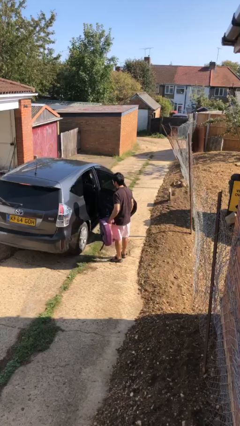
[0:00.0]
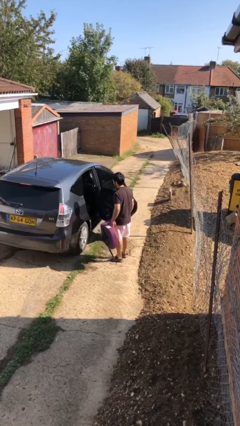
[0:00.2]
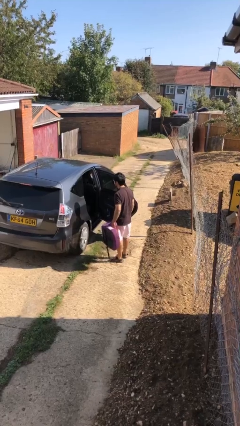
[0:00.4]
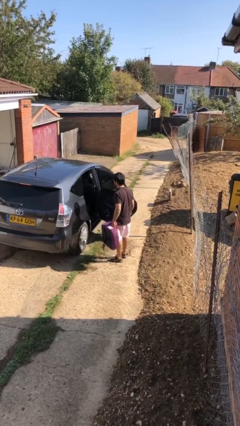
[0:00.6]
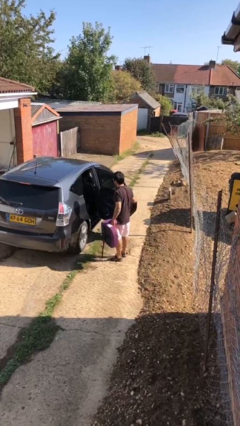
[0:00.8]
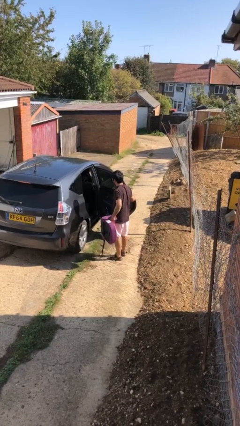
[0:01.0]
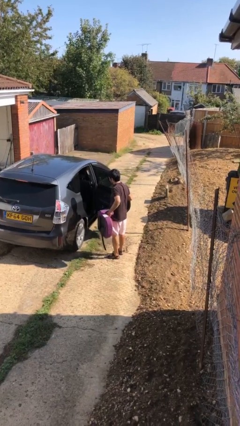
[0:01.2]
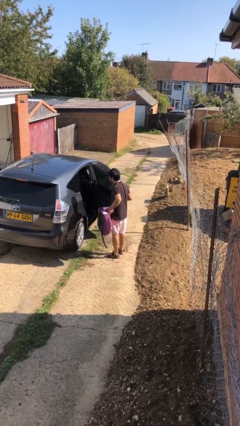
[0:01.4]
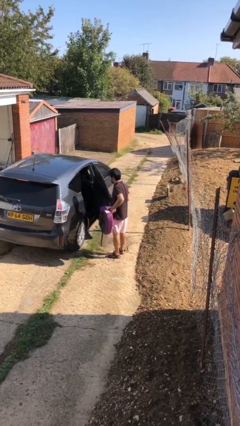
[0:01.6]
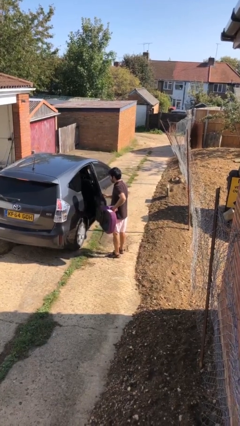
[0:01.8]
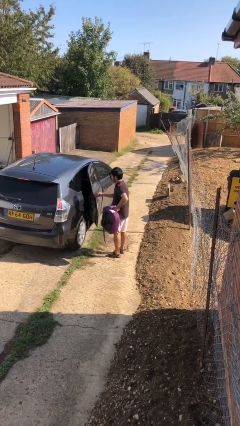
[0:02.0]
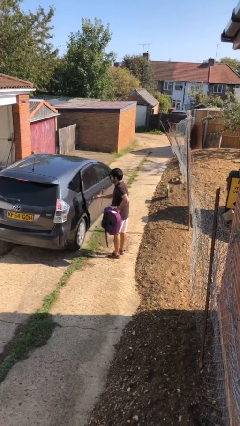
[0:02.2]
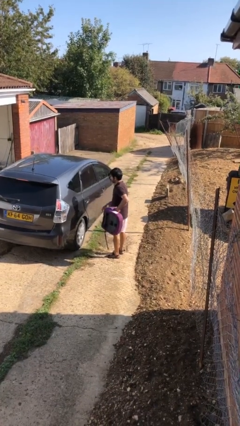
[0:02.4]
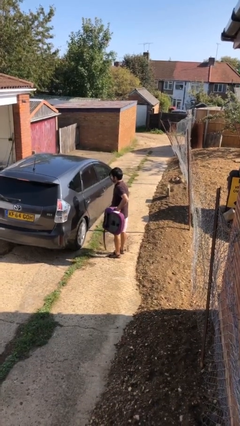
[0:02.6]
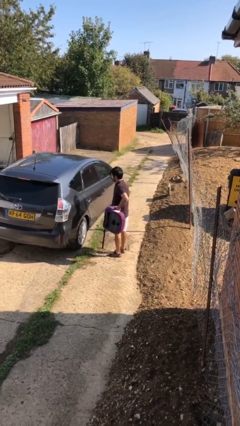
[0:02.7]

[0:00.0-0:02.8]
person closes car door

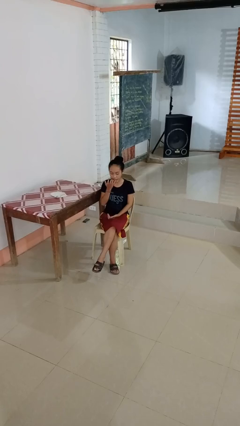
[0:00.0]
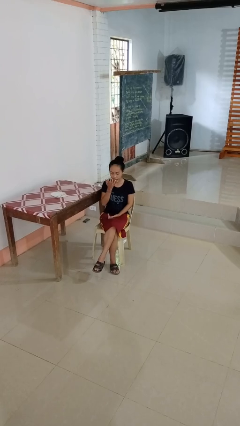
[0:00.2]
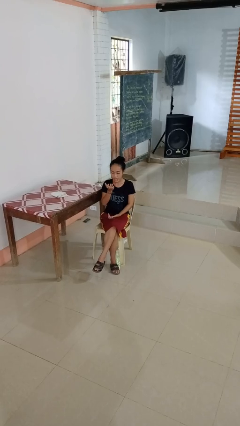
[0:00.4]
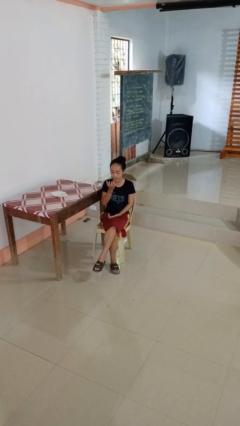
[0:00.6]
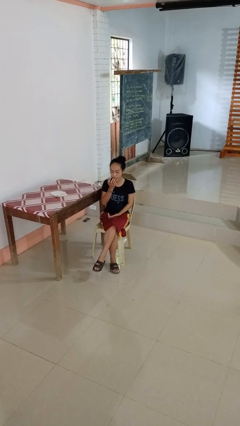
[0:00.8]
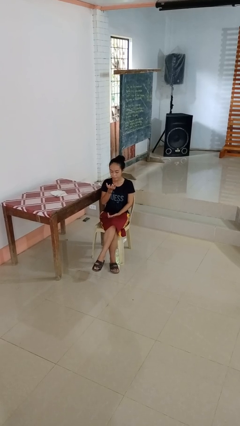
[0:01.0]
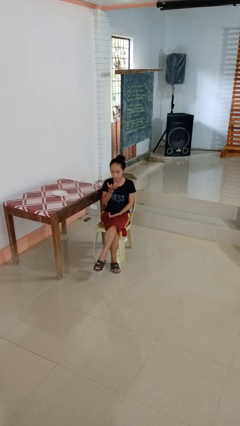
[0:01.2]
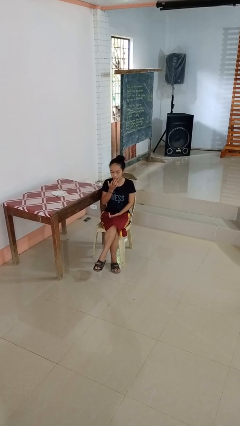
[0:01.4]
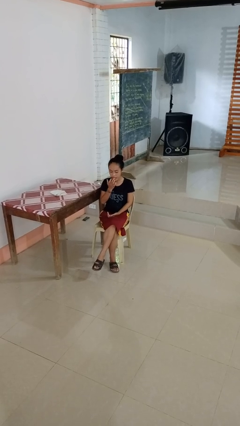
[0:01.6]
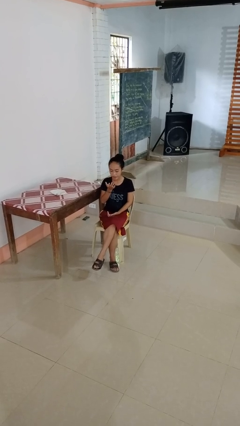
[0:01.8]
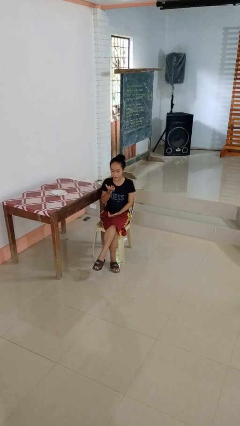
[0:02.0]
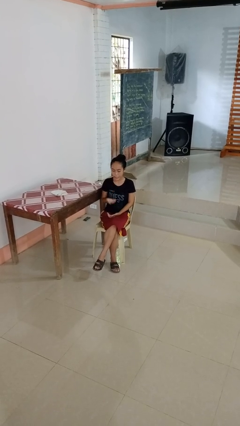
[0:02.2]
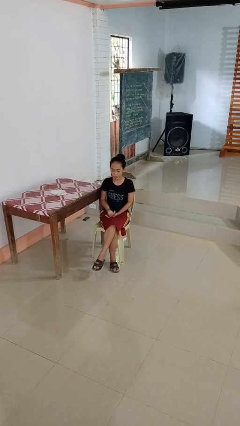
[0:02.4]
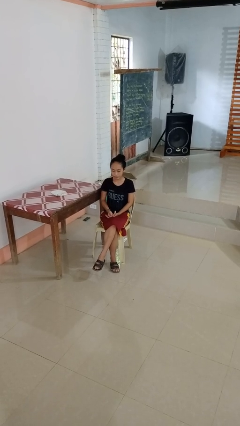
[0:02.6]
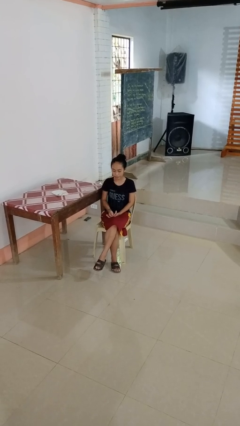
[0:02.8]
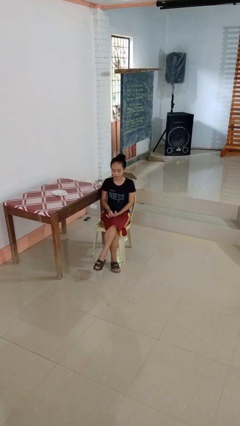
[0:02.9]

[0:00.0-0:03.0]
person licks fingers

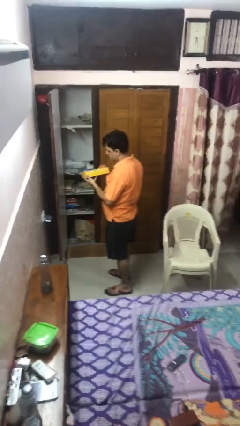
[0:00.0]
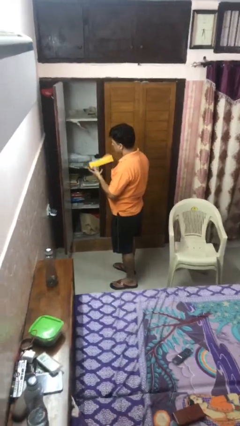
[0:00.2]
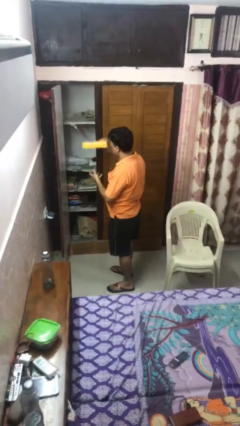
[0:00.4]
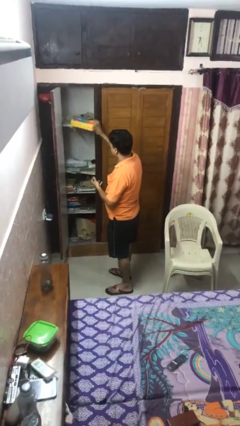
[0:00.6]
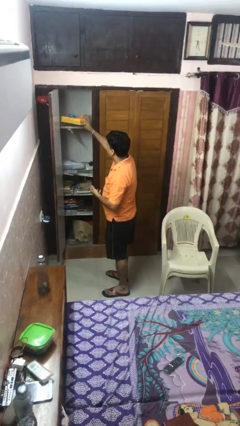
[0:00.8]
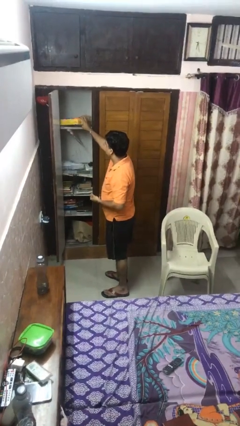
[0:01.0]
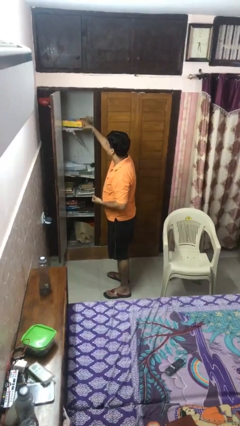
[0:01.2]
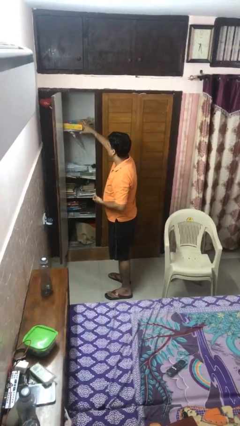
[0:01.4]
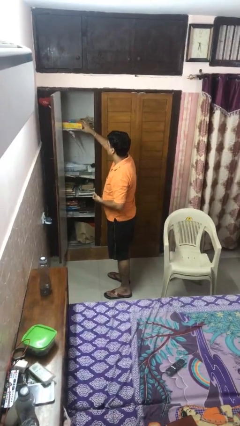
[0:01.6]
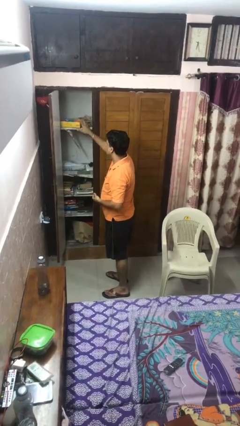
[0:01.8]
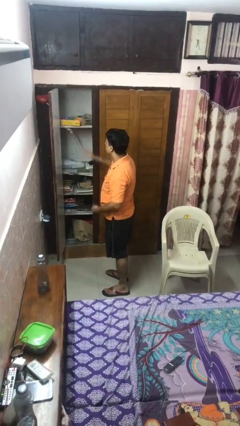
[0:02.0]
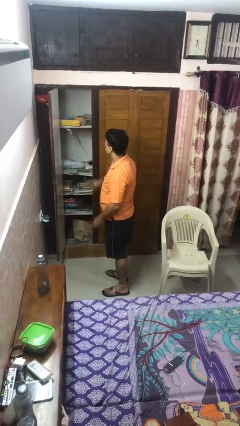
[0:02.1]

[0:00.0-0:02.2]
person puts down object on shelf

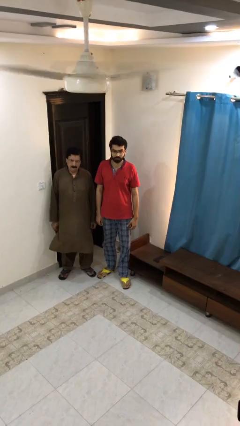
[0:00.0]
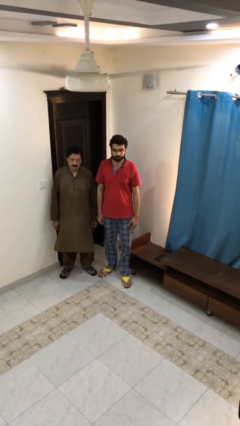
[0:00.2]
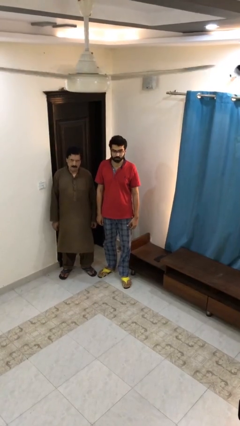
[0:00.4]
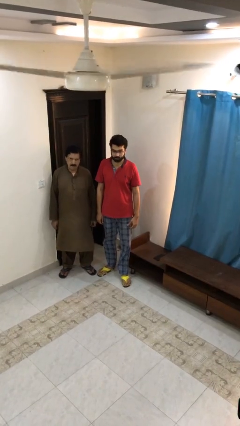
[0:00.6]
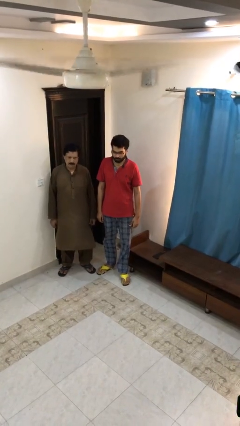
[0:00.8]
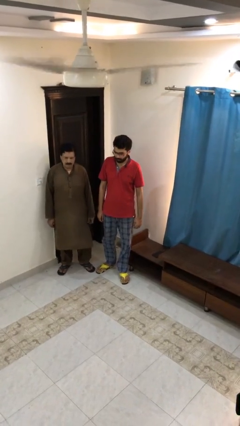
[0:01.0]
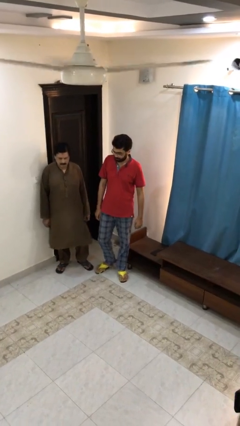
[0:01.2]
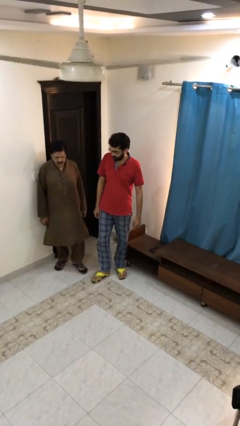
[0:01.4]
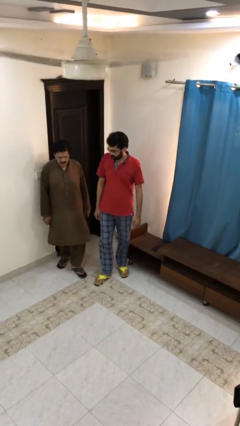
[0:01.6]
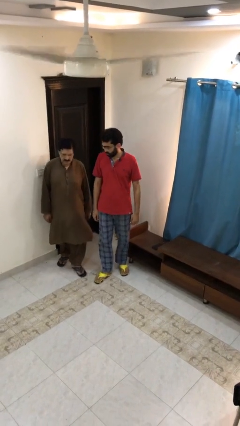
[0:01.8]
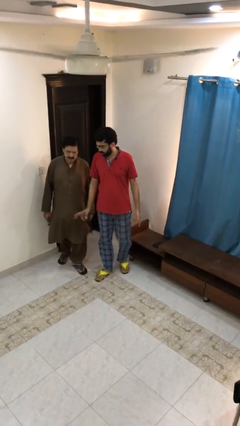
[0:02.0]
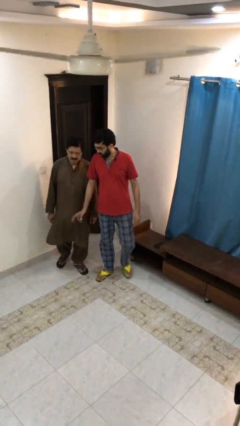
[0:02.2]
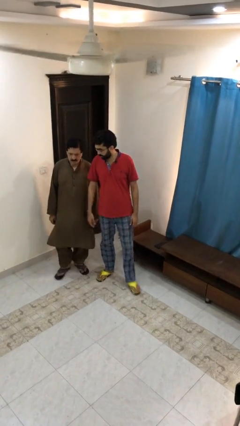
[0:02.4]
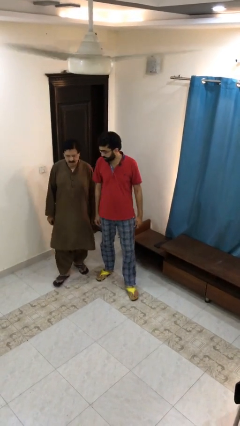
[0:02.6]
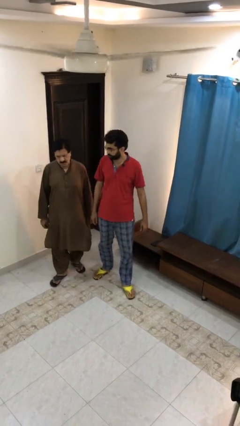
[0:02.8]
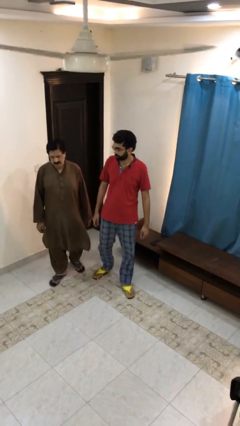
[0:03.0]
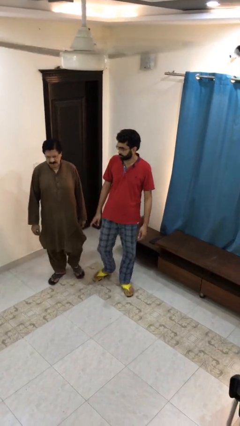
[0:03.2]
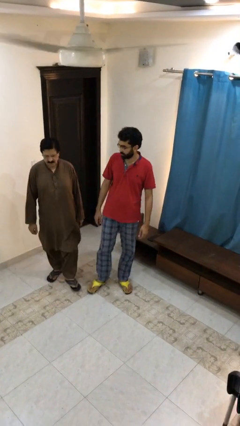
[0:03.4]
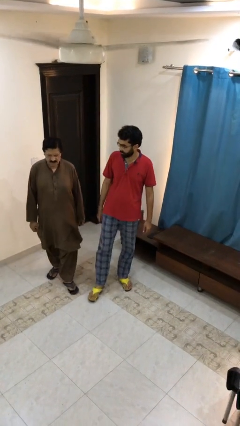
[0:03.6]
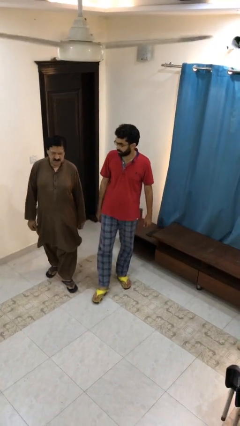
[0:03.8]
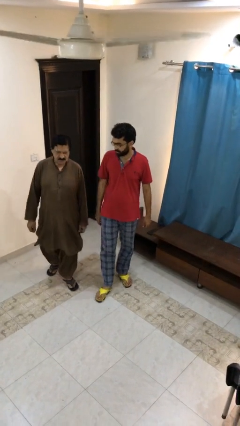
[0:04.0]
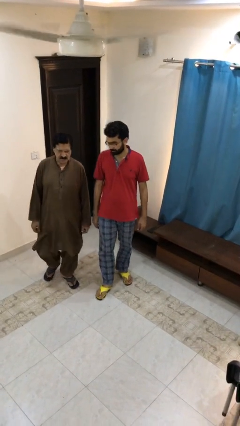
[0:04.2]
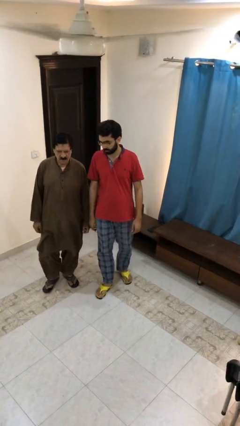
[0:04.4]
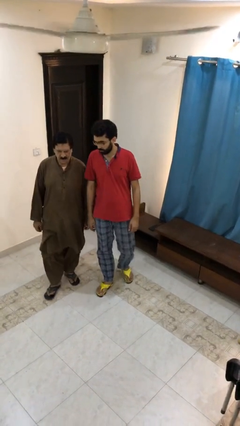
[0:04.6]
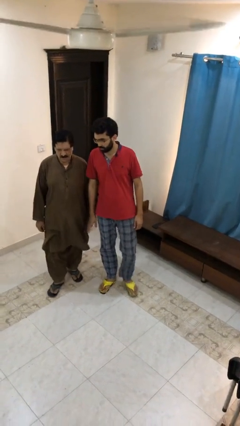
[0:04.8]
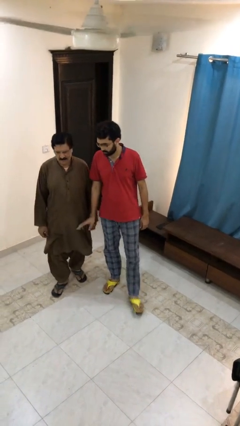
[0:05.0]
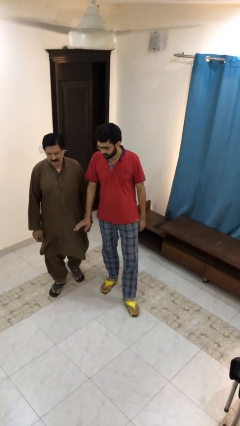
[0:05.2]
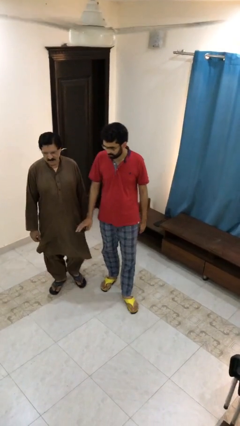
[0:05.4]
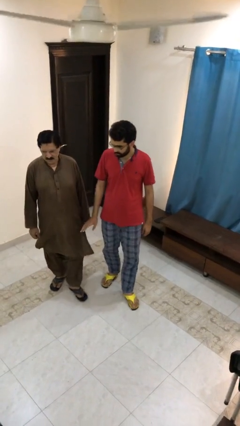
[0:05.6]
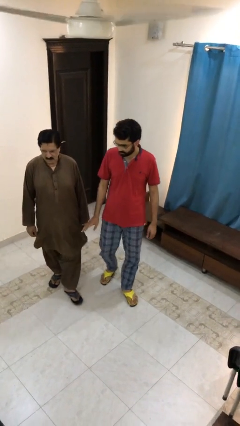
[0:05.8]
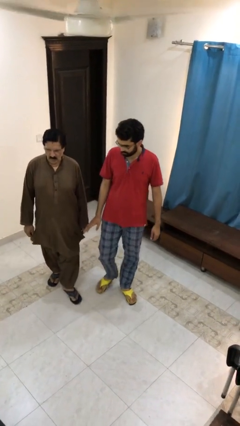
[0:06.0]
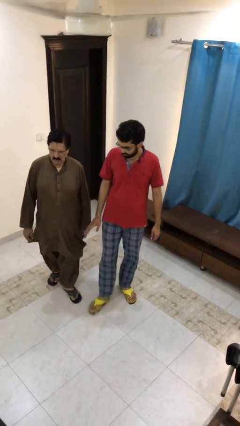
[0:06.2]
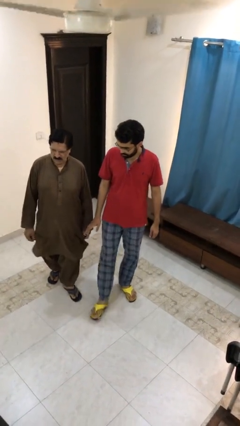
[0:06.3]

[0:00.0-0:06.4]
person talks to person

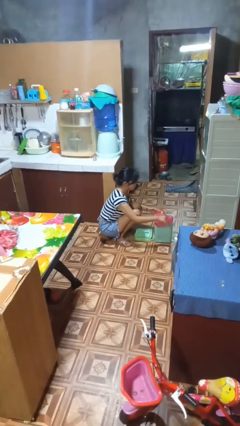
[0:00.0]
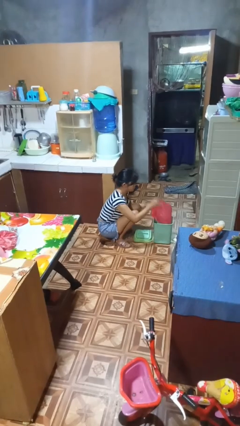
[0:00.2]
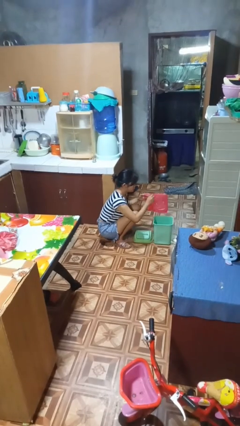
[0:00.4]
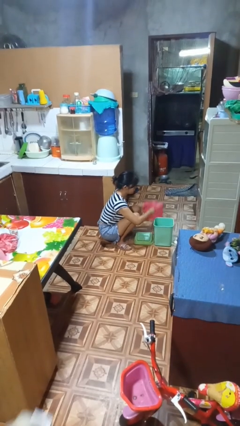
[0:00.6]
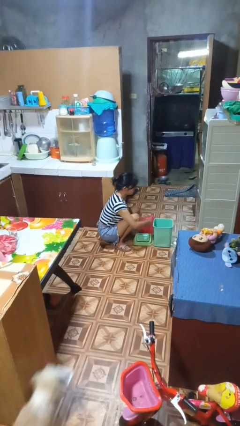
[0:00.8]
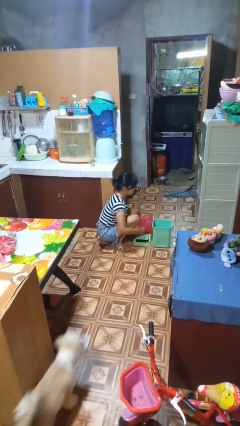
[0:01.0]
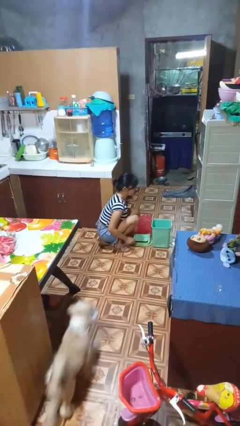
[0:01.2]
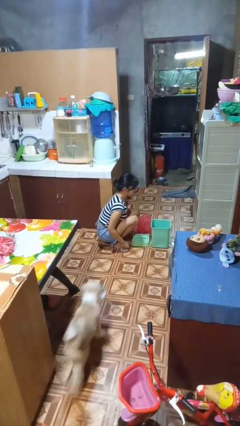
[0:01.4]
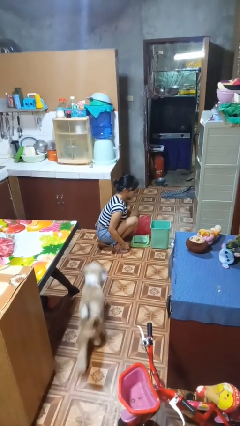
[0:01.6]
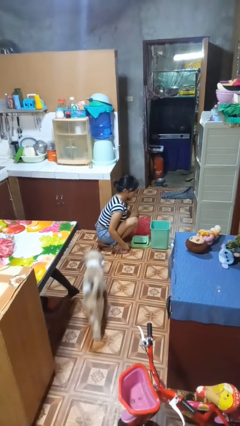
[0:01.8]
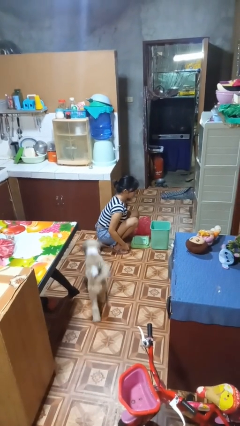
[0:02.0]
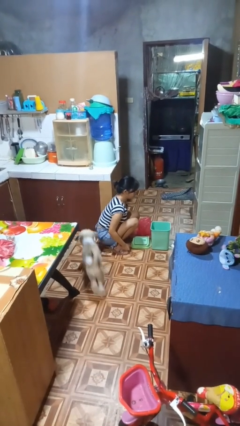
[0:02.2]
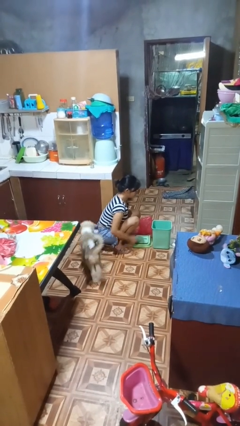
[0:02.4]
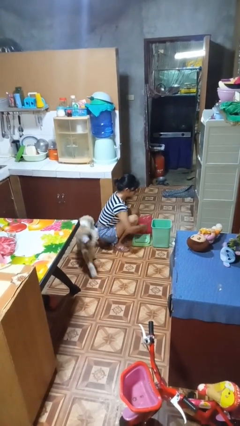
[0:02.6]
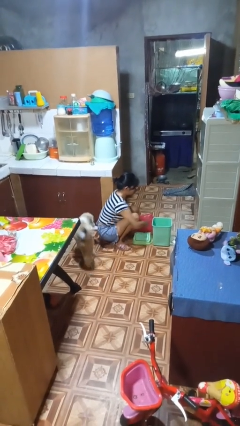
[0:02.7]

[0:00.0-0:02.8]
person removes trashbag from trashcan
